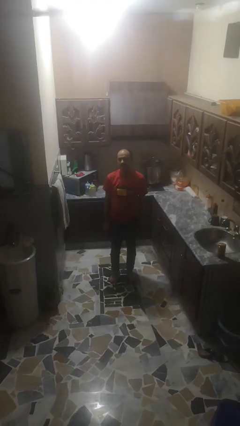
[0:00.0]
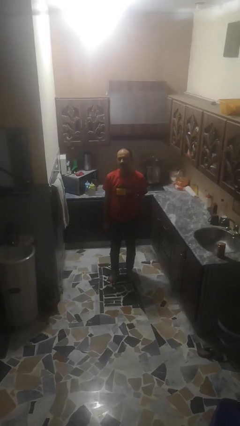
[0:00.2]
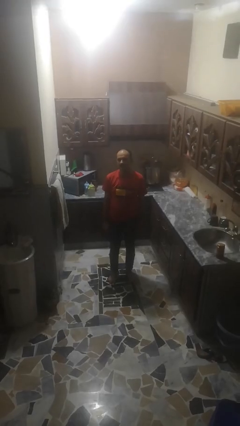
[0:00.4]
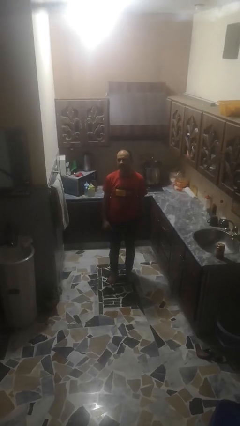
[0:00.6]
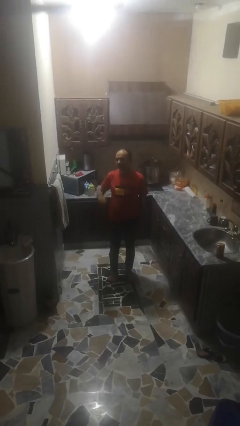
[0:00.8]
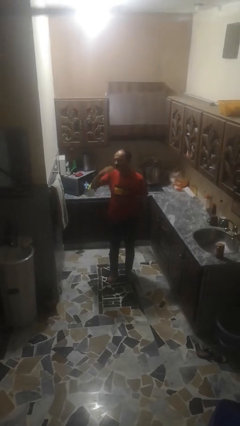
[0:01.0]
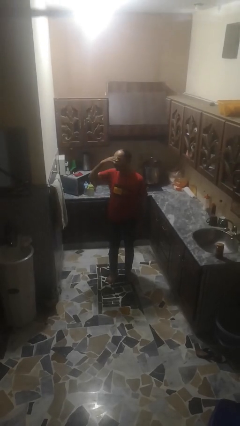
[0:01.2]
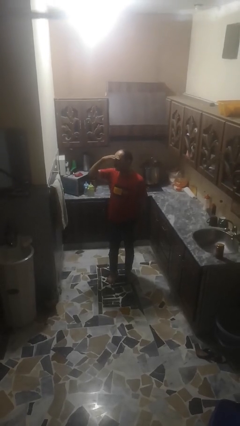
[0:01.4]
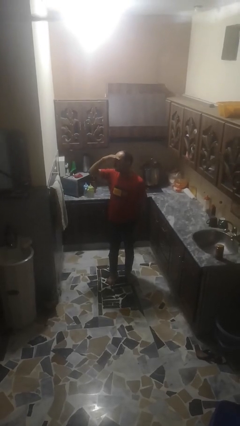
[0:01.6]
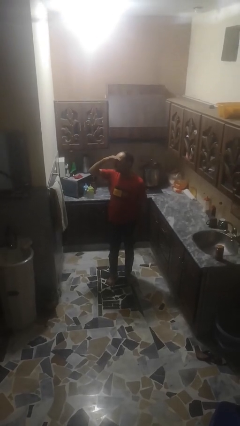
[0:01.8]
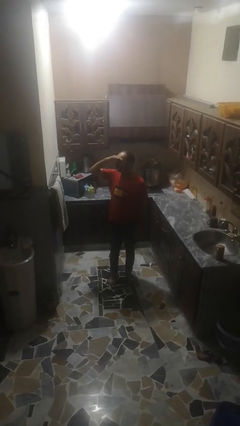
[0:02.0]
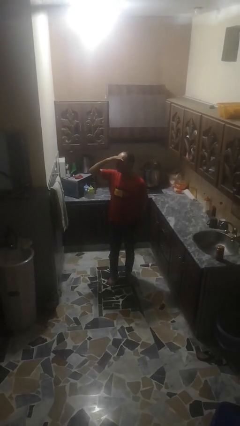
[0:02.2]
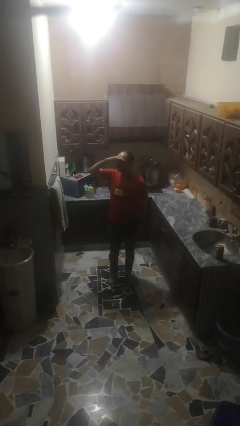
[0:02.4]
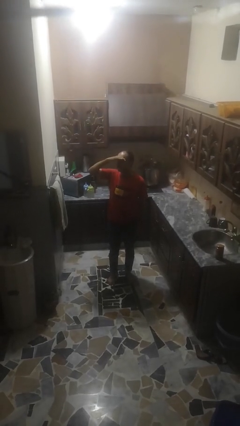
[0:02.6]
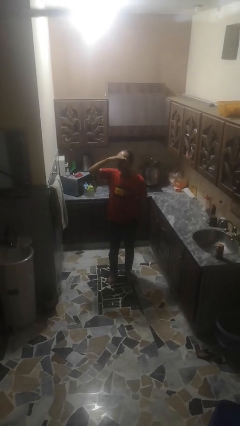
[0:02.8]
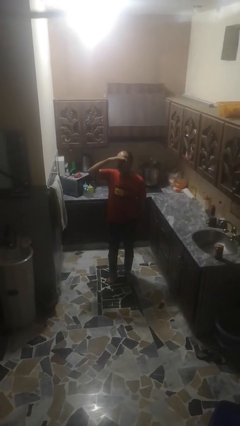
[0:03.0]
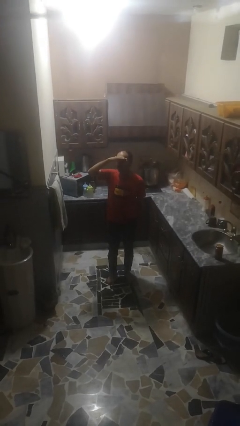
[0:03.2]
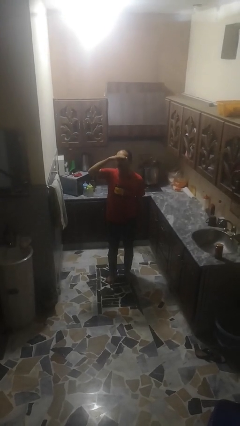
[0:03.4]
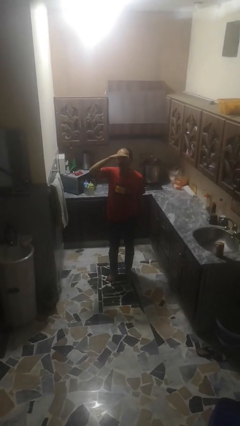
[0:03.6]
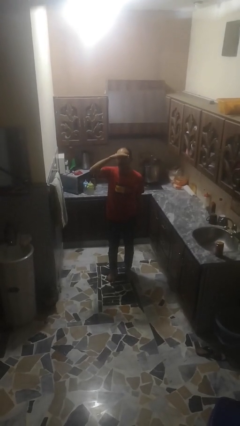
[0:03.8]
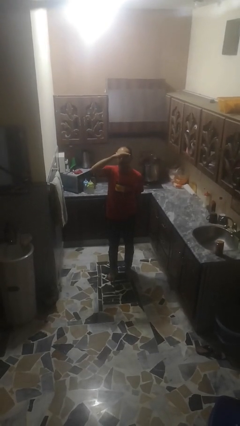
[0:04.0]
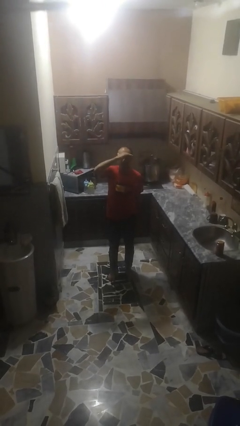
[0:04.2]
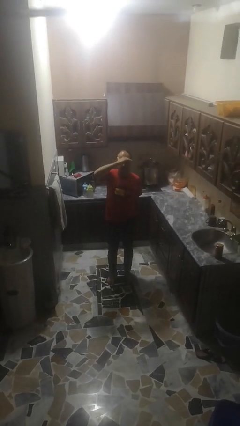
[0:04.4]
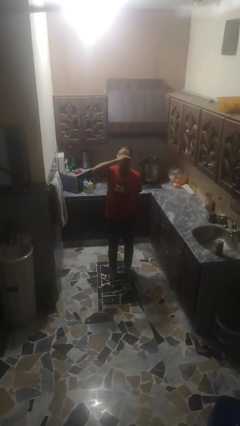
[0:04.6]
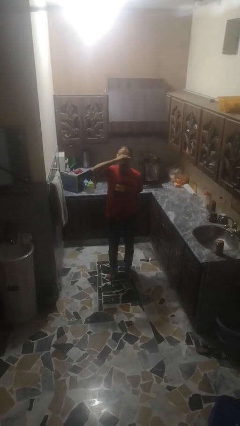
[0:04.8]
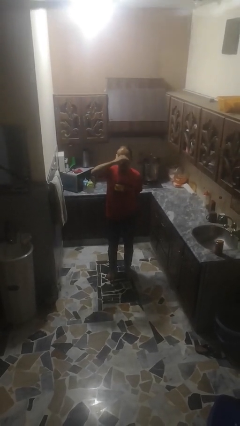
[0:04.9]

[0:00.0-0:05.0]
person shades eyes

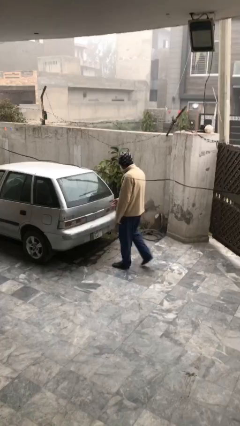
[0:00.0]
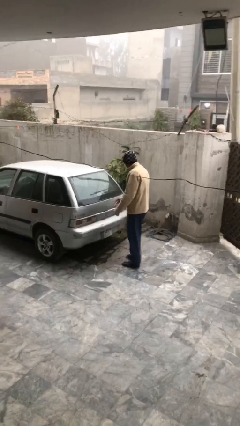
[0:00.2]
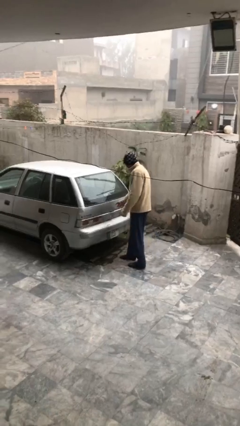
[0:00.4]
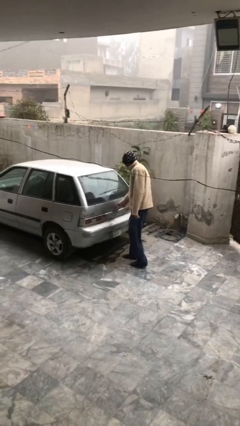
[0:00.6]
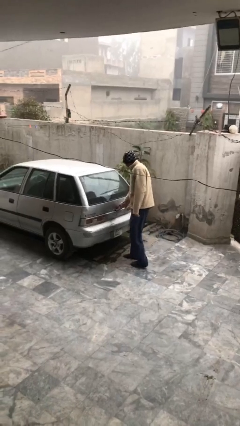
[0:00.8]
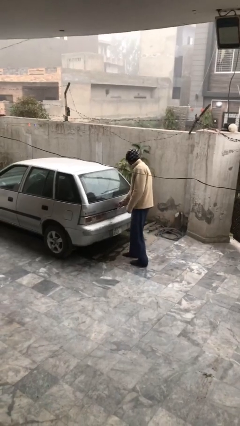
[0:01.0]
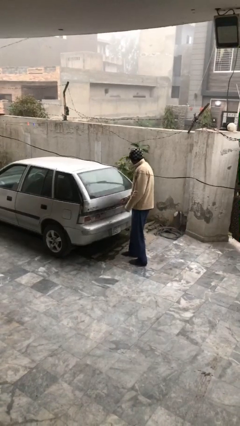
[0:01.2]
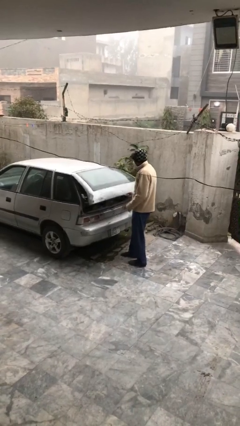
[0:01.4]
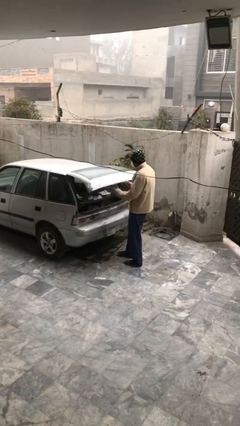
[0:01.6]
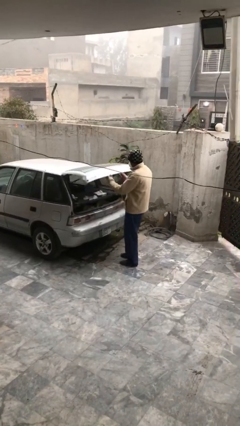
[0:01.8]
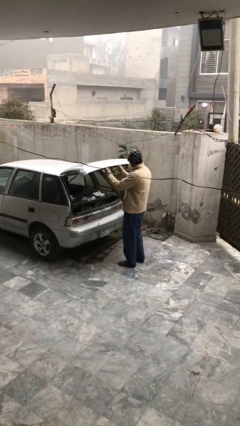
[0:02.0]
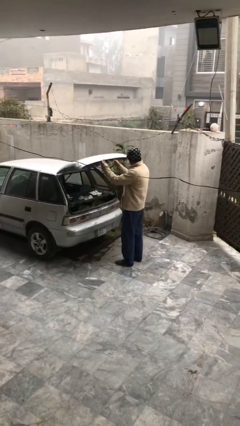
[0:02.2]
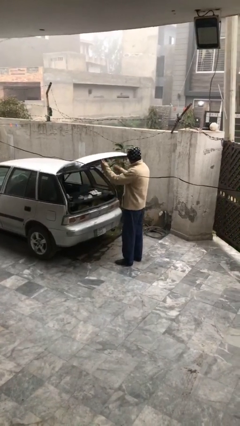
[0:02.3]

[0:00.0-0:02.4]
person opens car trunk

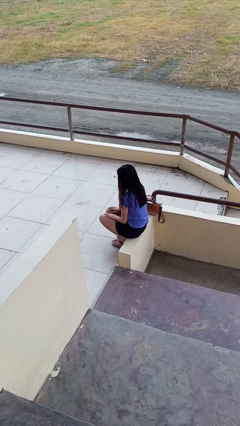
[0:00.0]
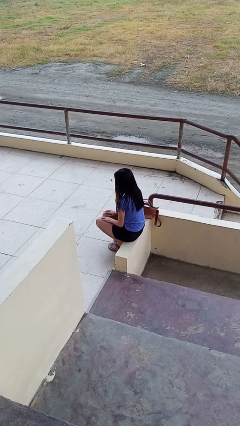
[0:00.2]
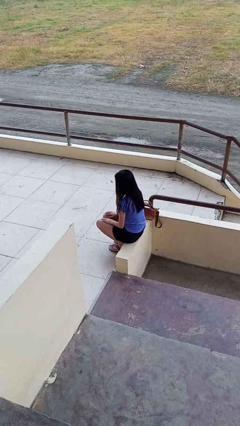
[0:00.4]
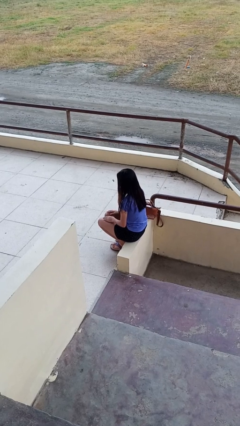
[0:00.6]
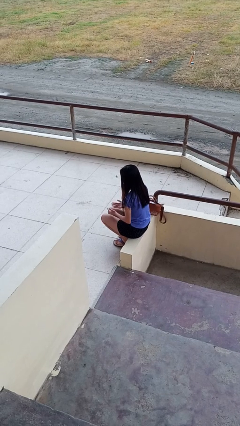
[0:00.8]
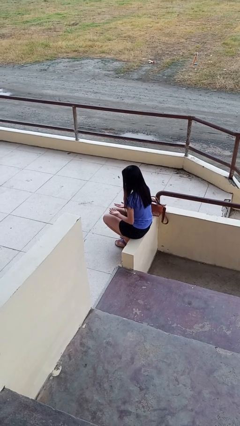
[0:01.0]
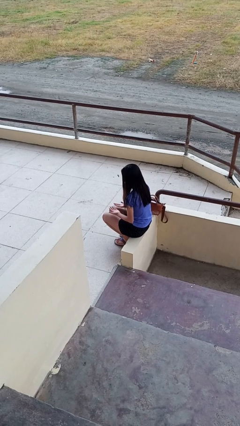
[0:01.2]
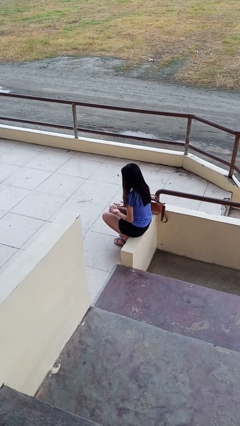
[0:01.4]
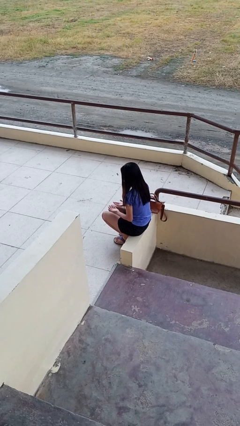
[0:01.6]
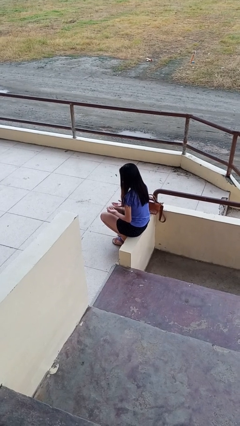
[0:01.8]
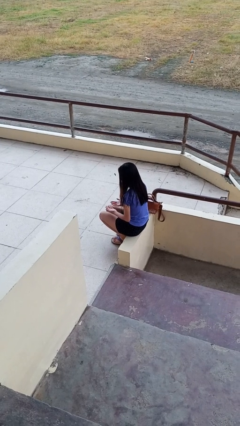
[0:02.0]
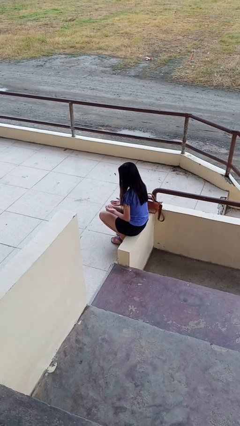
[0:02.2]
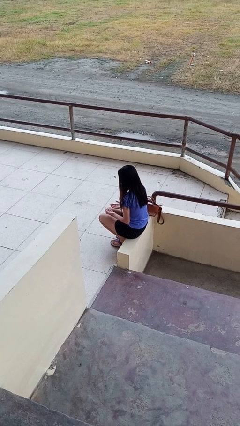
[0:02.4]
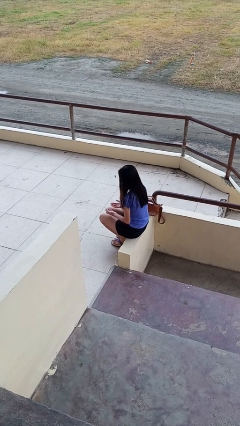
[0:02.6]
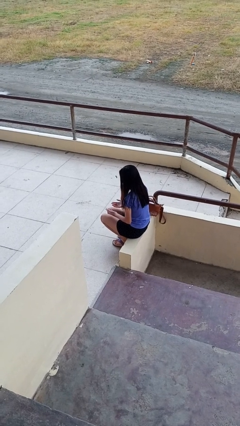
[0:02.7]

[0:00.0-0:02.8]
person looks at hands in lap

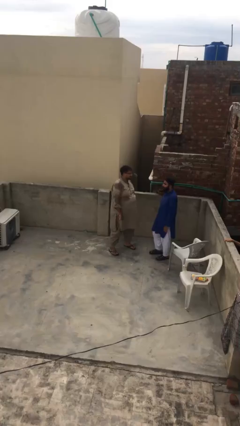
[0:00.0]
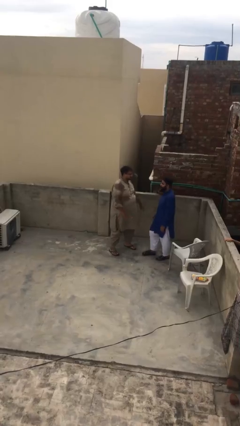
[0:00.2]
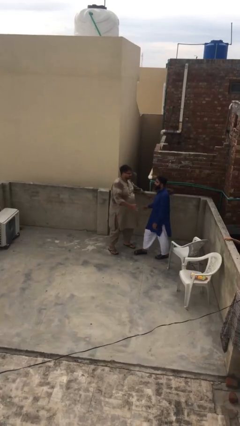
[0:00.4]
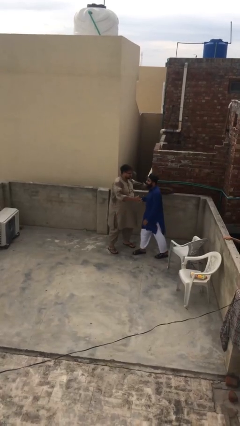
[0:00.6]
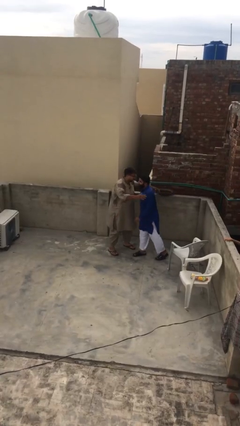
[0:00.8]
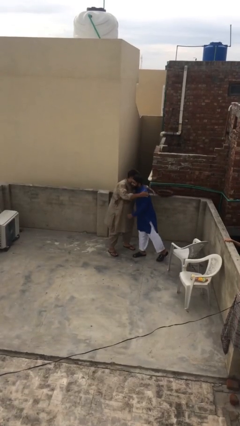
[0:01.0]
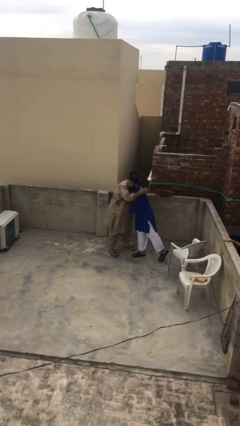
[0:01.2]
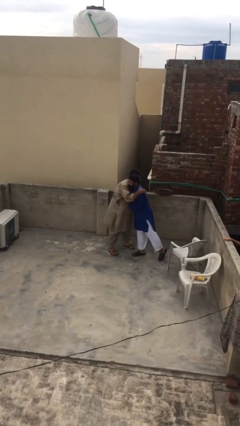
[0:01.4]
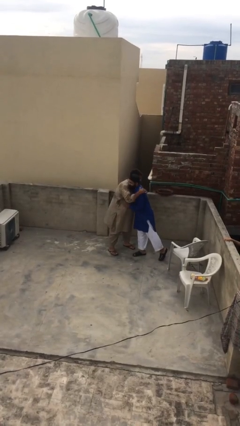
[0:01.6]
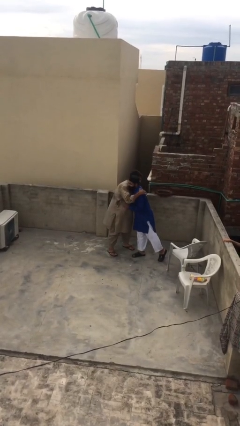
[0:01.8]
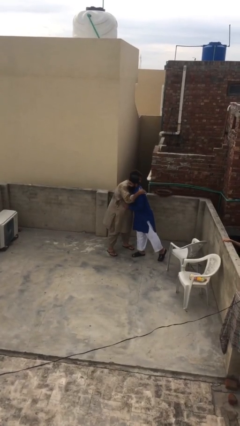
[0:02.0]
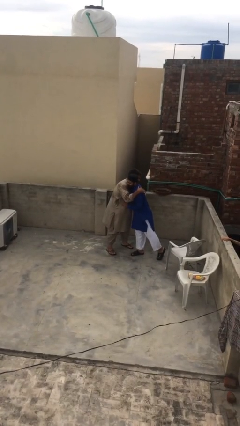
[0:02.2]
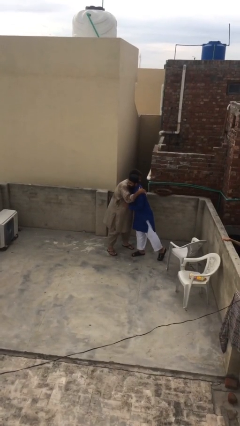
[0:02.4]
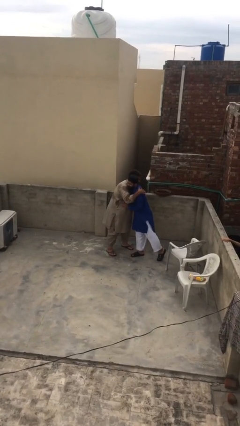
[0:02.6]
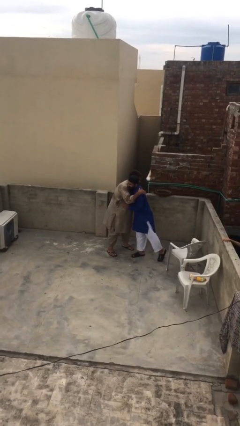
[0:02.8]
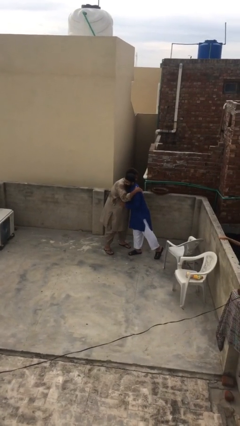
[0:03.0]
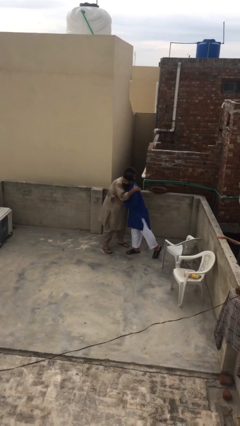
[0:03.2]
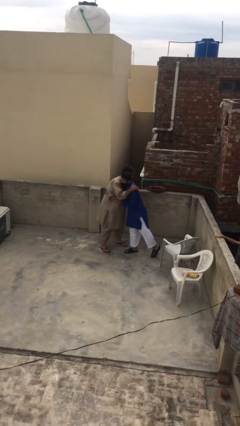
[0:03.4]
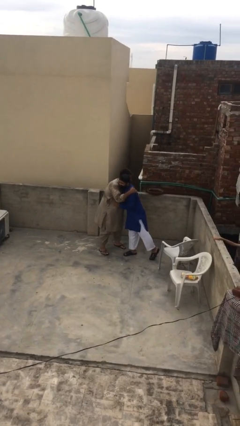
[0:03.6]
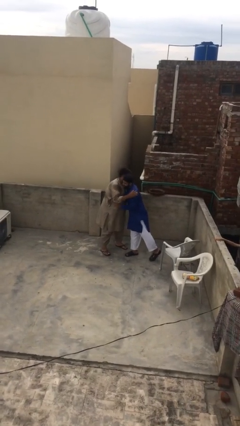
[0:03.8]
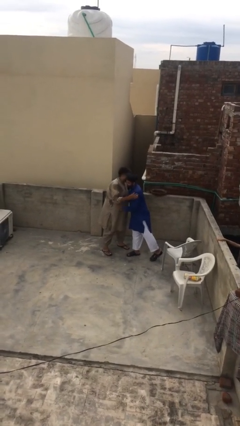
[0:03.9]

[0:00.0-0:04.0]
person embraces person

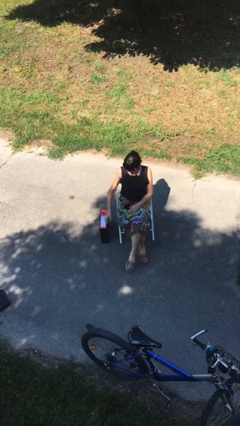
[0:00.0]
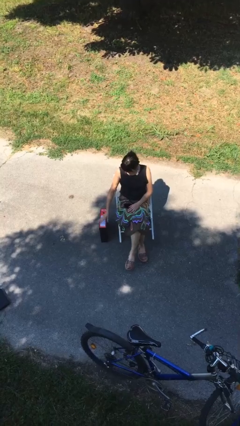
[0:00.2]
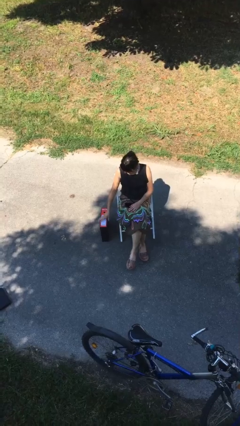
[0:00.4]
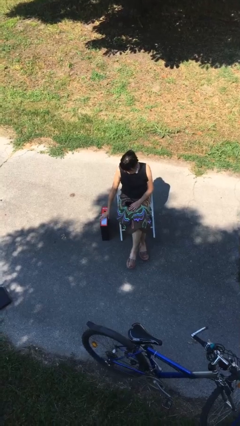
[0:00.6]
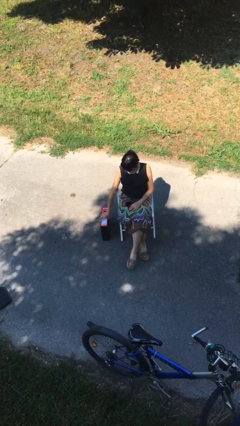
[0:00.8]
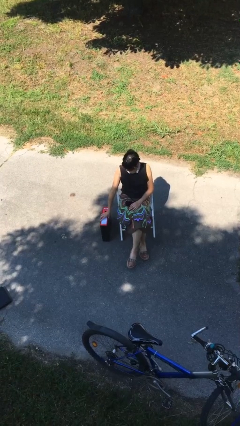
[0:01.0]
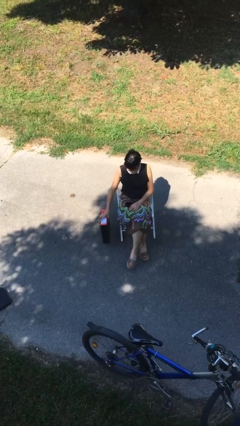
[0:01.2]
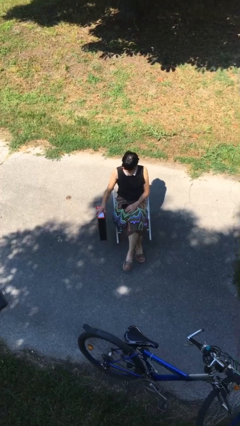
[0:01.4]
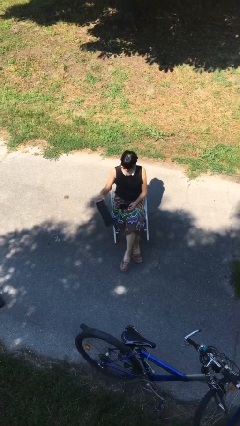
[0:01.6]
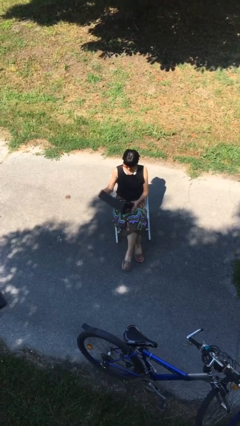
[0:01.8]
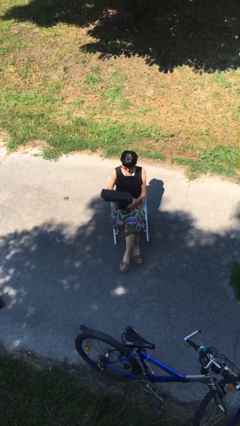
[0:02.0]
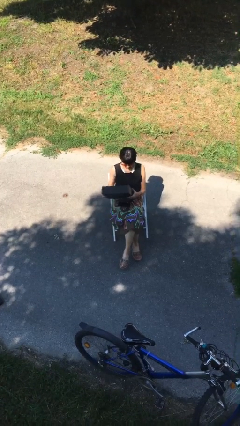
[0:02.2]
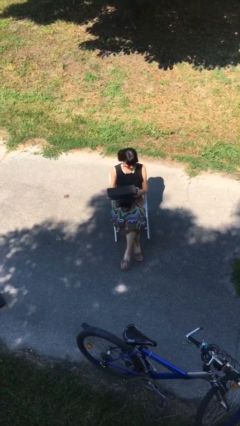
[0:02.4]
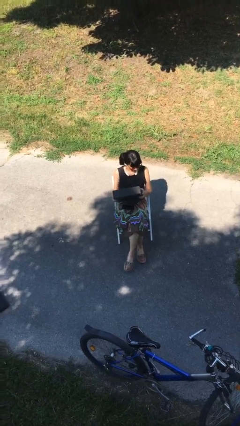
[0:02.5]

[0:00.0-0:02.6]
person picks up object from floor

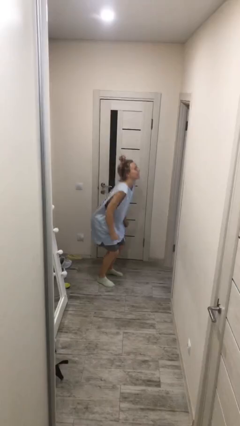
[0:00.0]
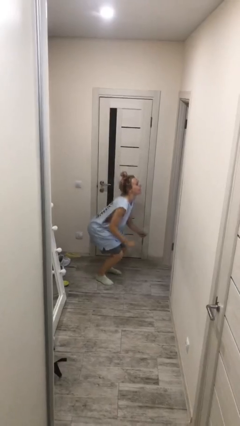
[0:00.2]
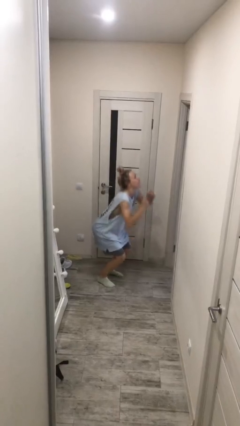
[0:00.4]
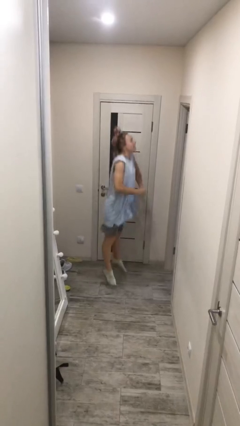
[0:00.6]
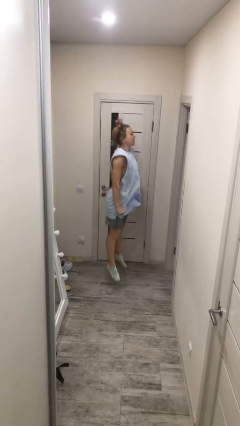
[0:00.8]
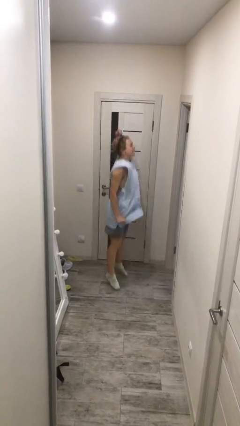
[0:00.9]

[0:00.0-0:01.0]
person jumps
